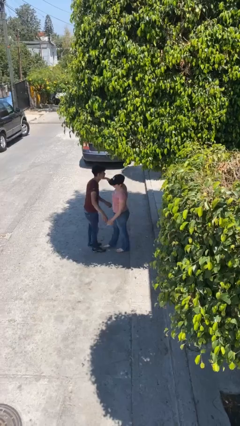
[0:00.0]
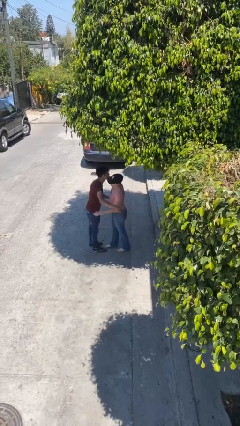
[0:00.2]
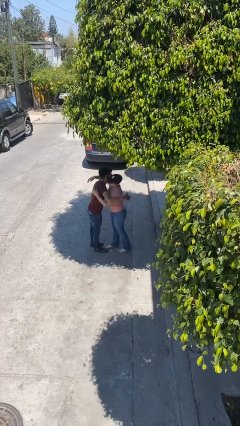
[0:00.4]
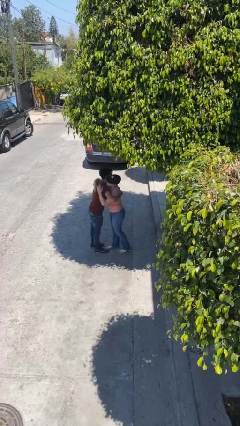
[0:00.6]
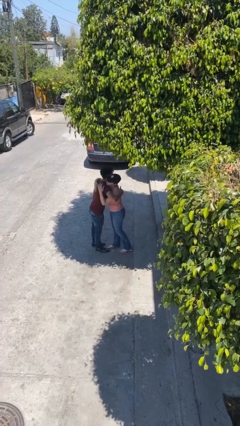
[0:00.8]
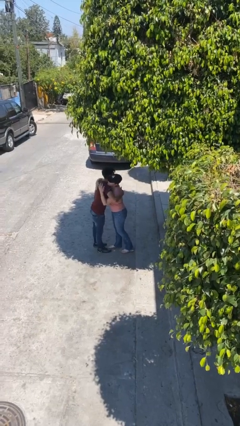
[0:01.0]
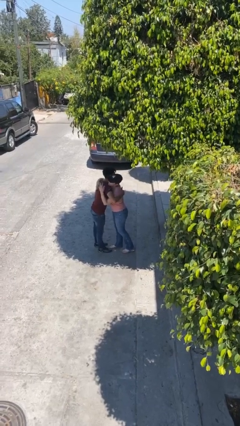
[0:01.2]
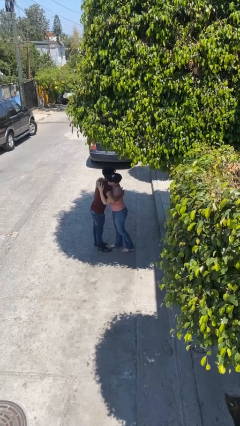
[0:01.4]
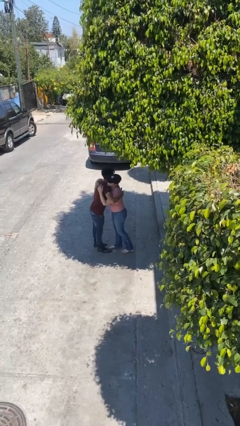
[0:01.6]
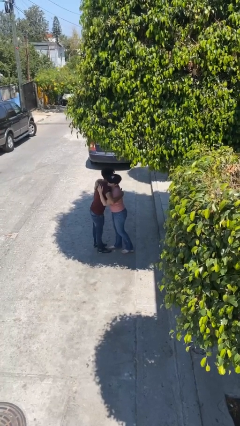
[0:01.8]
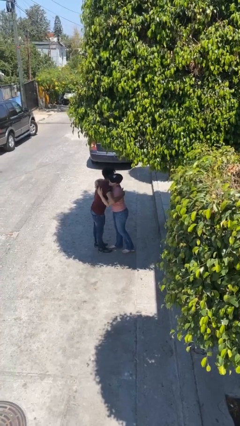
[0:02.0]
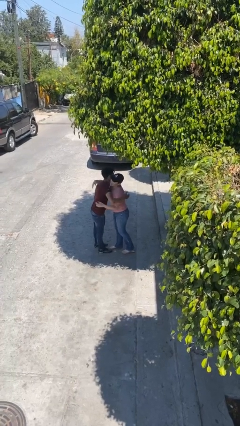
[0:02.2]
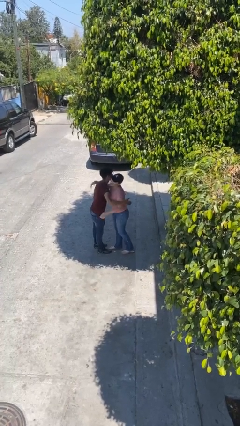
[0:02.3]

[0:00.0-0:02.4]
person embraces person

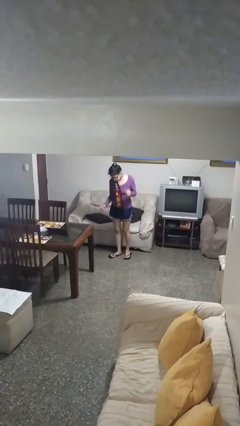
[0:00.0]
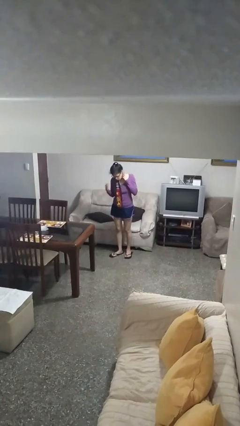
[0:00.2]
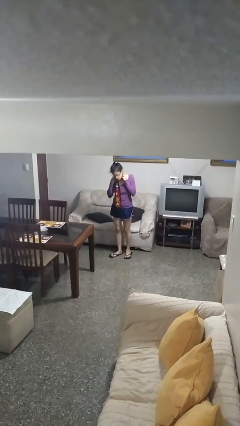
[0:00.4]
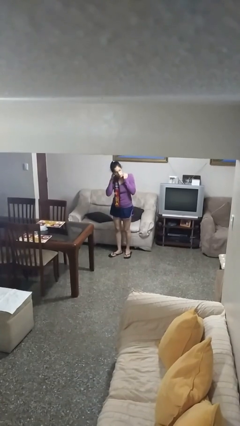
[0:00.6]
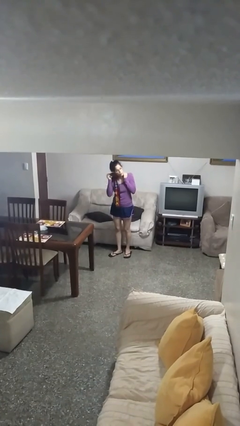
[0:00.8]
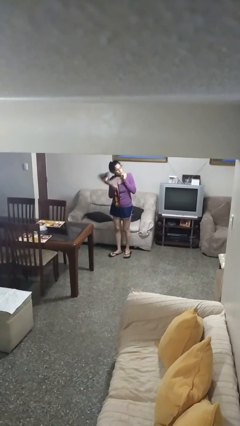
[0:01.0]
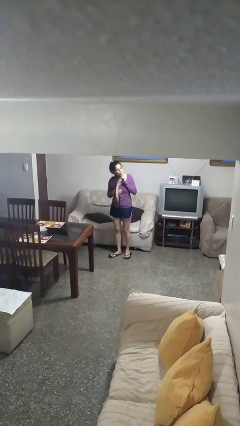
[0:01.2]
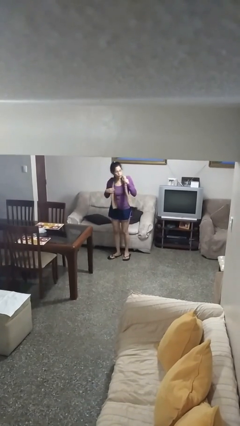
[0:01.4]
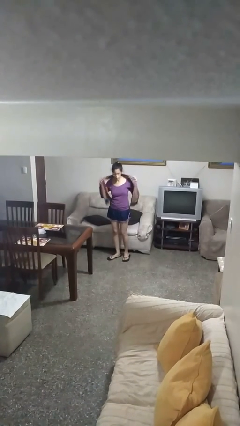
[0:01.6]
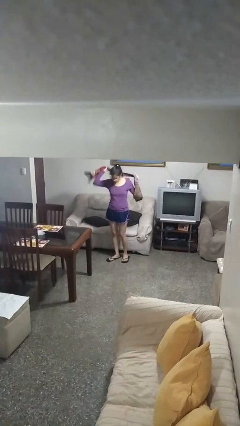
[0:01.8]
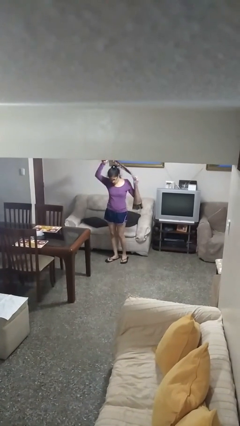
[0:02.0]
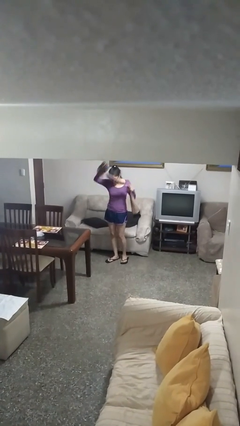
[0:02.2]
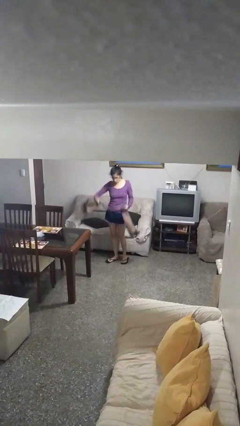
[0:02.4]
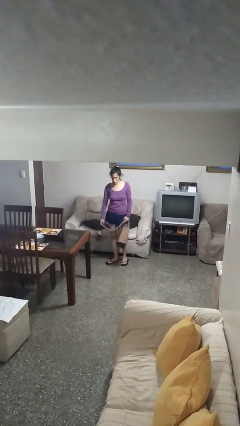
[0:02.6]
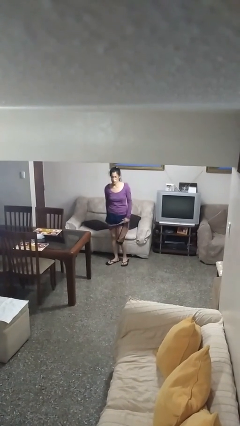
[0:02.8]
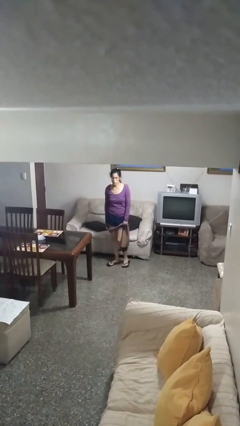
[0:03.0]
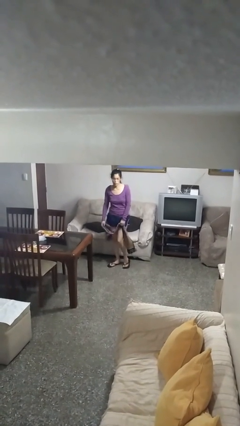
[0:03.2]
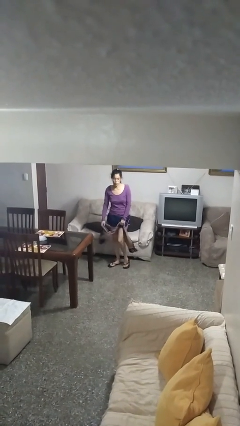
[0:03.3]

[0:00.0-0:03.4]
person takes off scarf

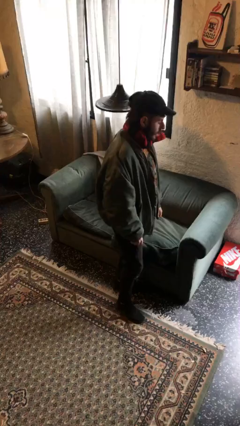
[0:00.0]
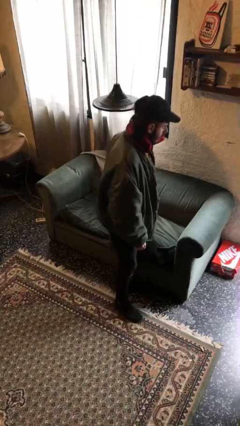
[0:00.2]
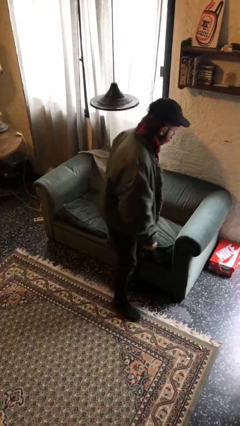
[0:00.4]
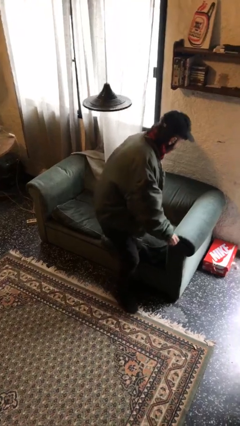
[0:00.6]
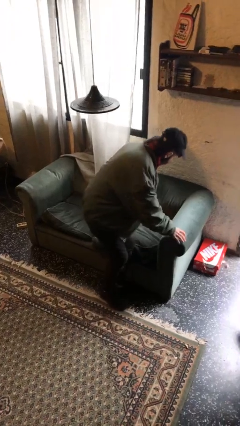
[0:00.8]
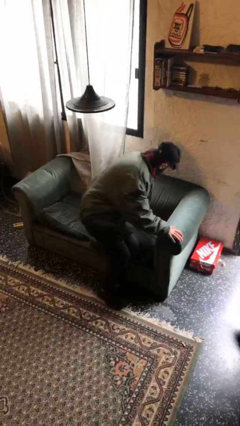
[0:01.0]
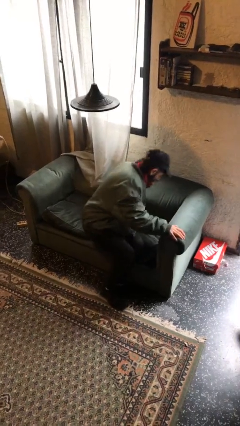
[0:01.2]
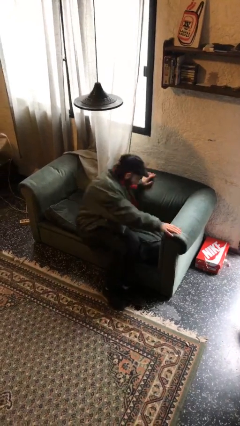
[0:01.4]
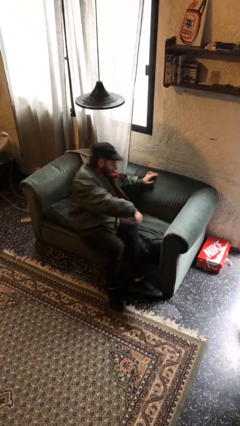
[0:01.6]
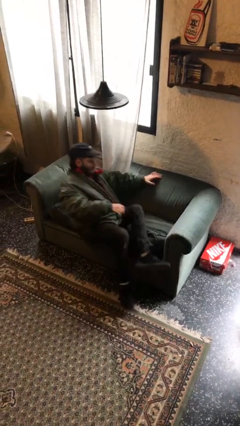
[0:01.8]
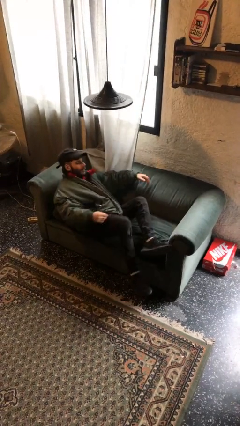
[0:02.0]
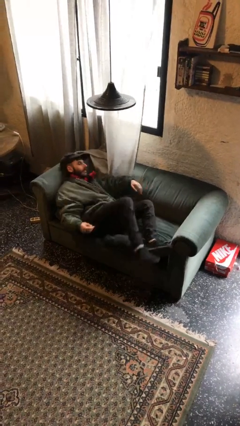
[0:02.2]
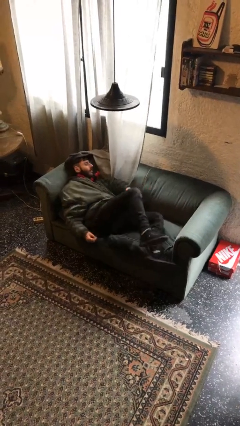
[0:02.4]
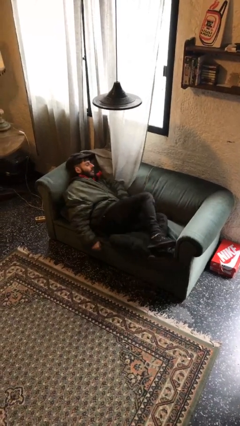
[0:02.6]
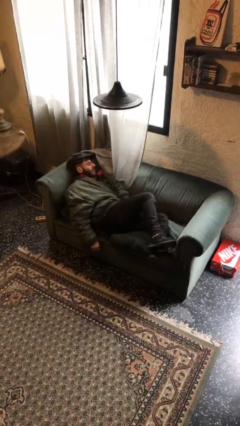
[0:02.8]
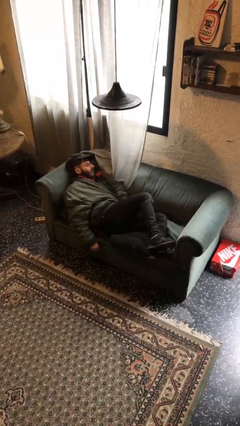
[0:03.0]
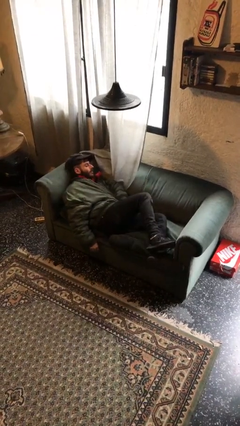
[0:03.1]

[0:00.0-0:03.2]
person lies down on couch

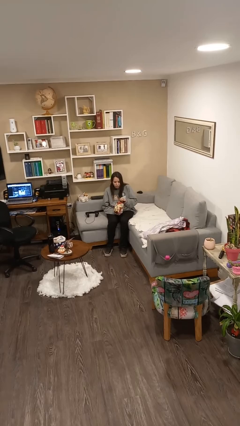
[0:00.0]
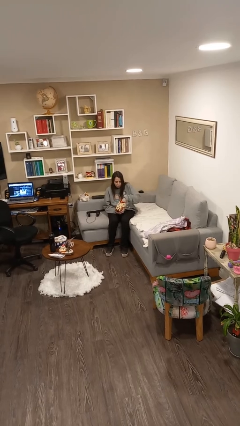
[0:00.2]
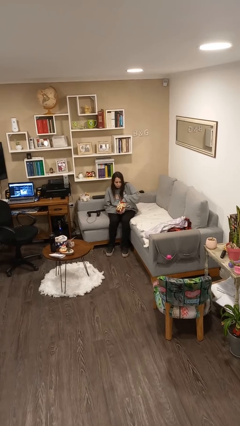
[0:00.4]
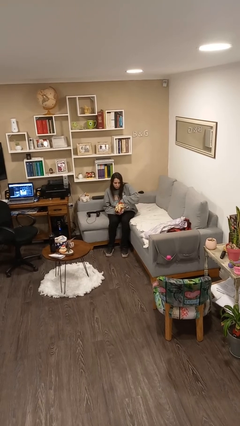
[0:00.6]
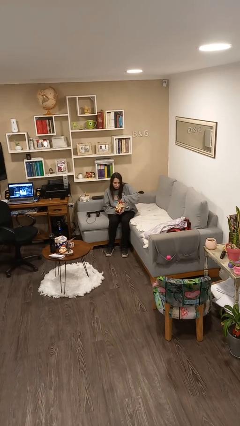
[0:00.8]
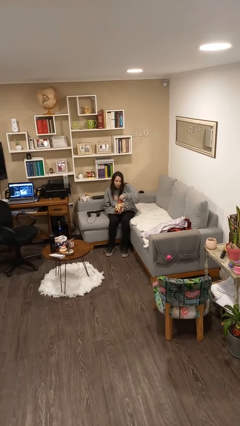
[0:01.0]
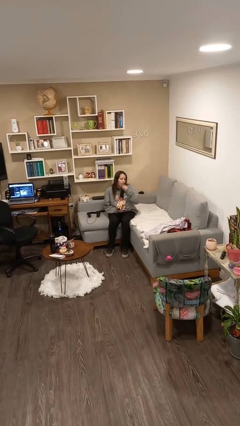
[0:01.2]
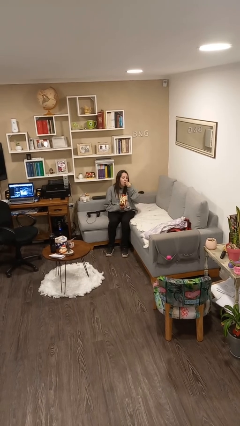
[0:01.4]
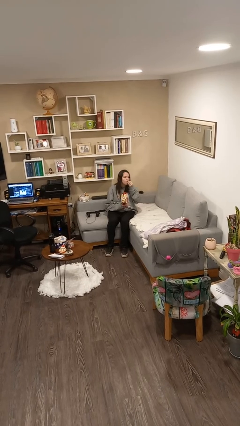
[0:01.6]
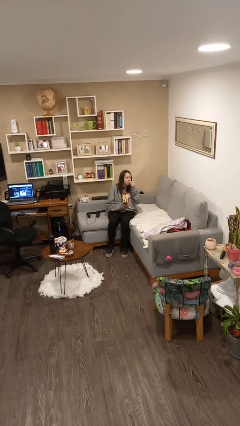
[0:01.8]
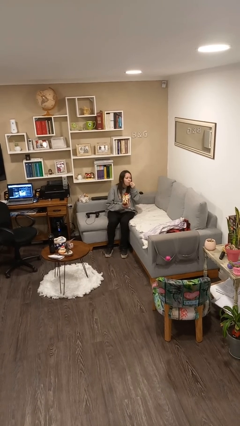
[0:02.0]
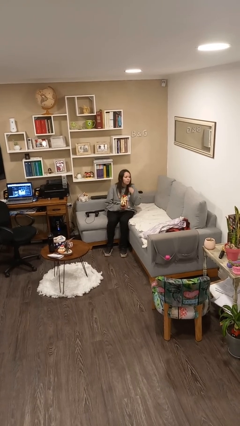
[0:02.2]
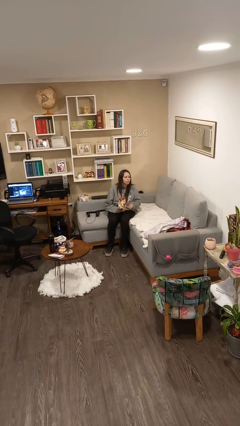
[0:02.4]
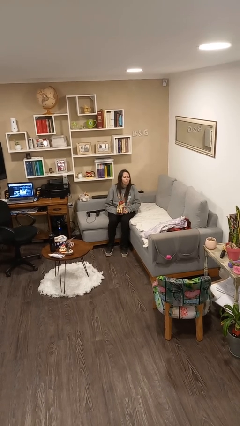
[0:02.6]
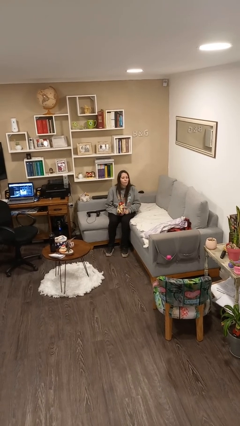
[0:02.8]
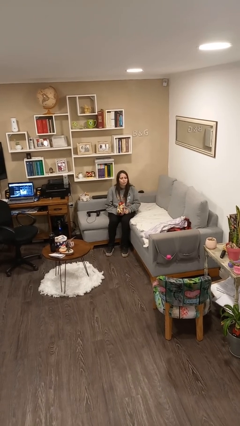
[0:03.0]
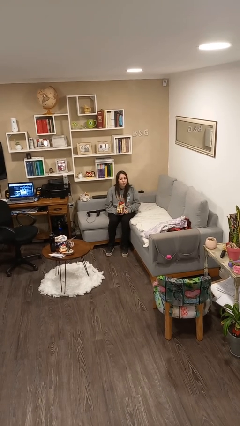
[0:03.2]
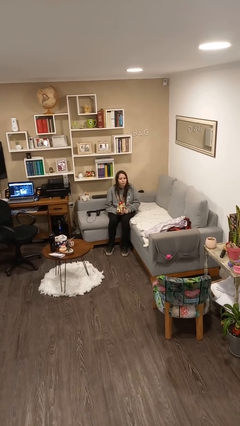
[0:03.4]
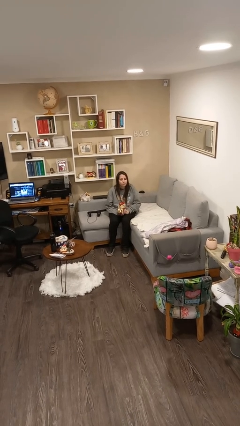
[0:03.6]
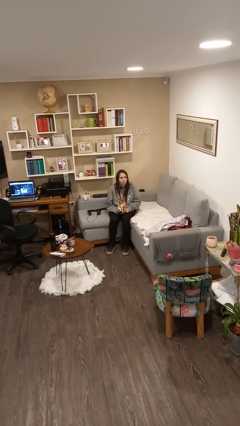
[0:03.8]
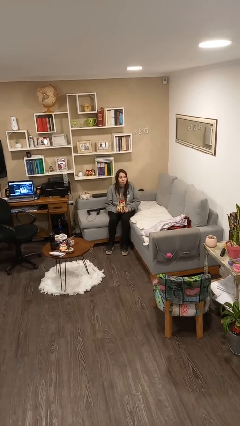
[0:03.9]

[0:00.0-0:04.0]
person eats snack from bag

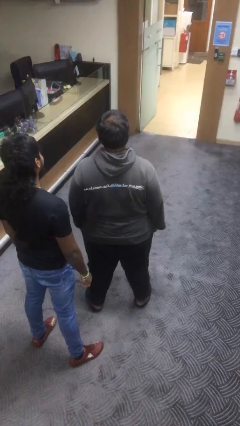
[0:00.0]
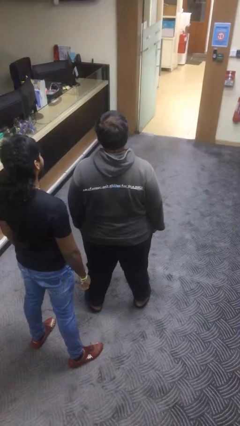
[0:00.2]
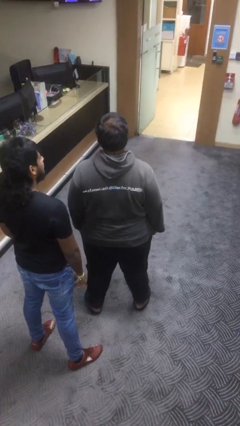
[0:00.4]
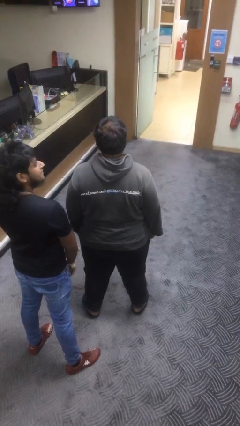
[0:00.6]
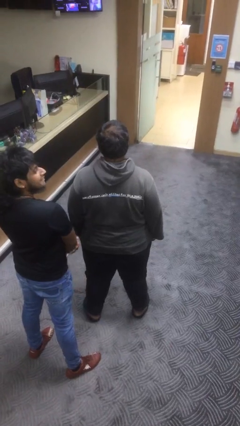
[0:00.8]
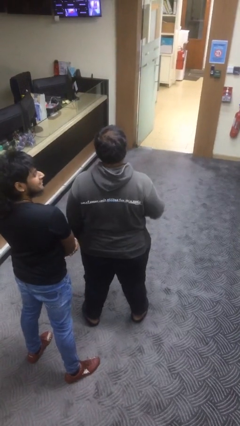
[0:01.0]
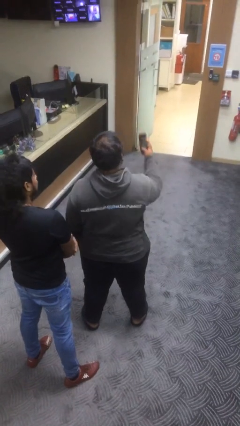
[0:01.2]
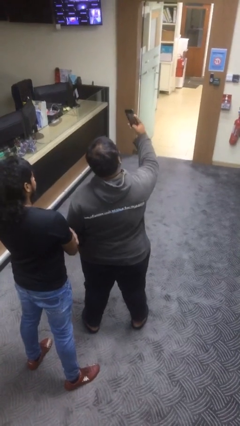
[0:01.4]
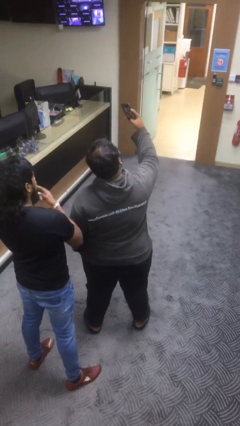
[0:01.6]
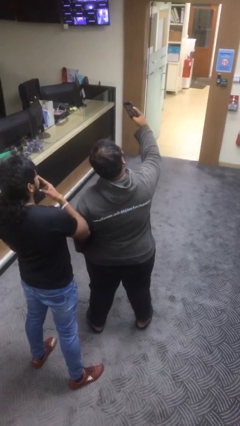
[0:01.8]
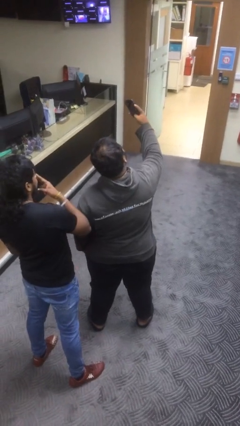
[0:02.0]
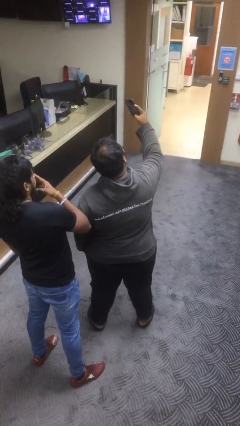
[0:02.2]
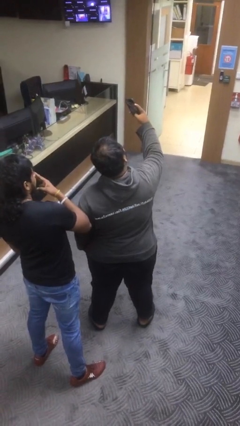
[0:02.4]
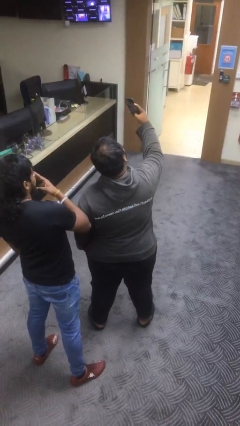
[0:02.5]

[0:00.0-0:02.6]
person takes selfie with person

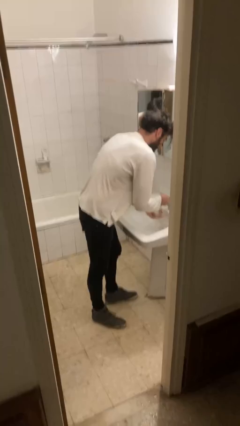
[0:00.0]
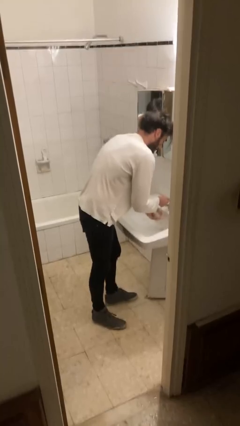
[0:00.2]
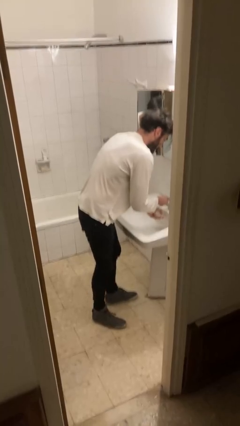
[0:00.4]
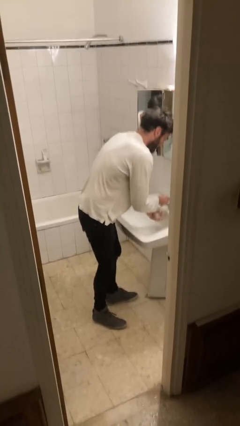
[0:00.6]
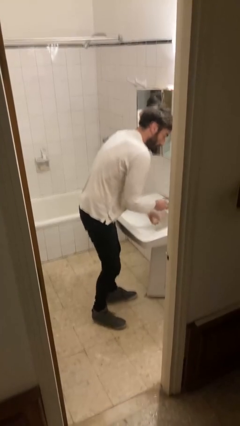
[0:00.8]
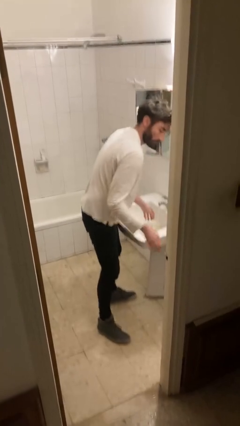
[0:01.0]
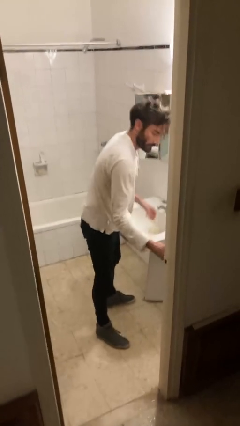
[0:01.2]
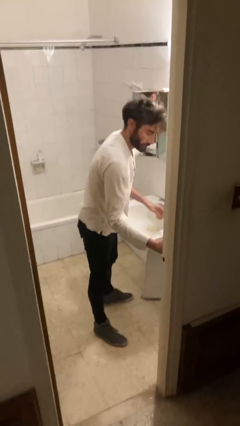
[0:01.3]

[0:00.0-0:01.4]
person washes hands

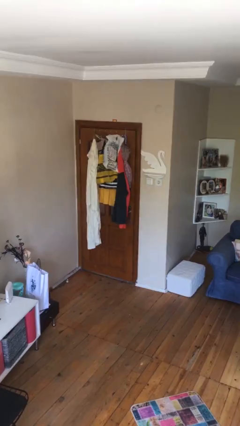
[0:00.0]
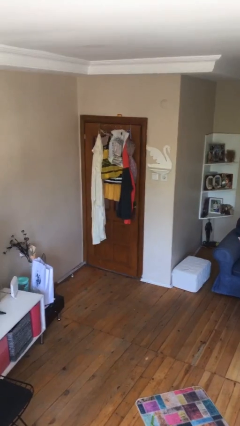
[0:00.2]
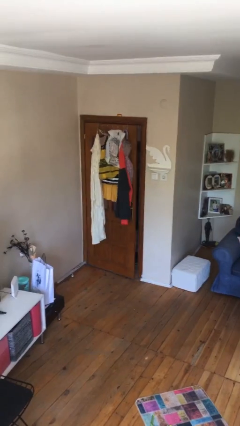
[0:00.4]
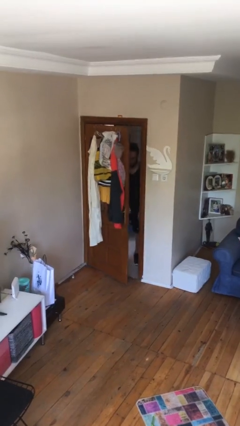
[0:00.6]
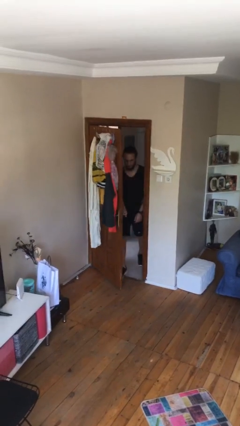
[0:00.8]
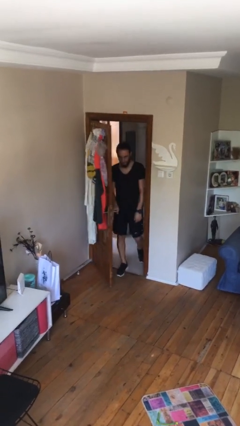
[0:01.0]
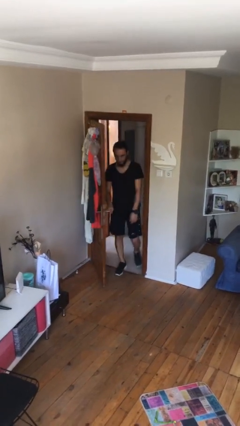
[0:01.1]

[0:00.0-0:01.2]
person opens facility door
